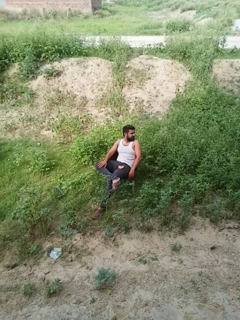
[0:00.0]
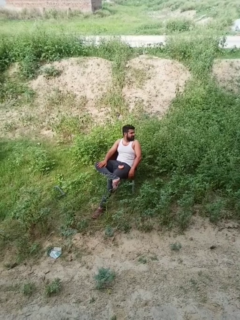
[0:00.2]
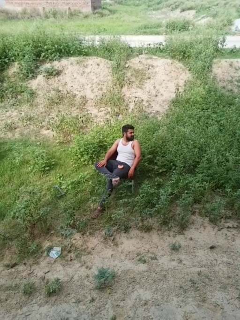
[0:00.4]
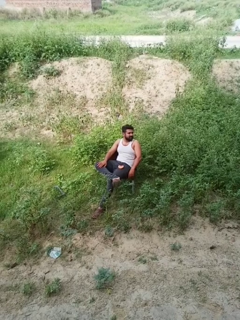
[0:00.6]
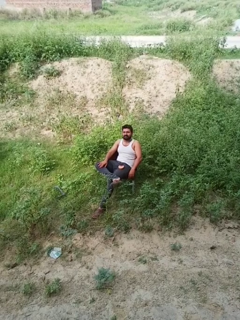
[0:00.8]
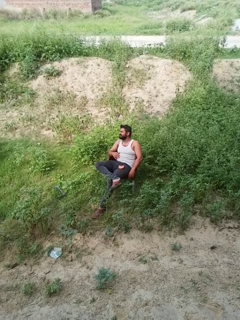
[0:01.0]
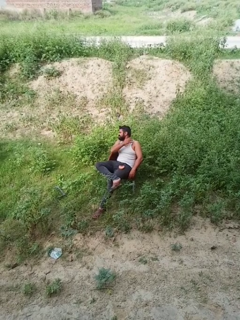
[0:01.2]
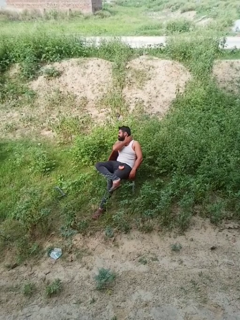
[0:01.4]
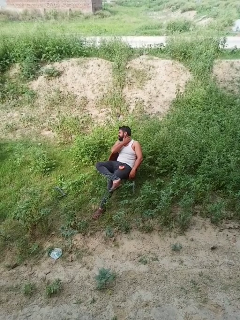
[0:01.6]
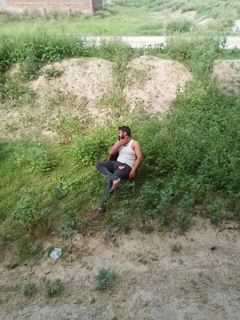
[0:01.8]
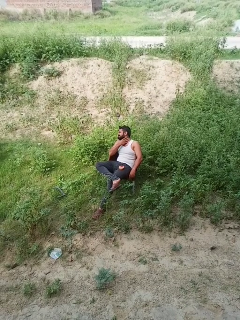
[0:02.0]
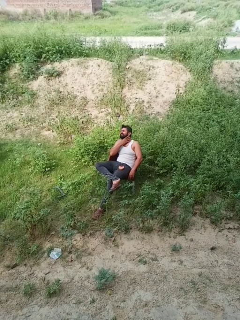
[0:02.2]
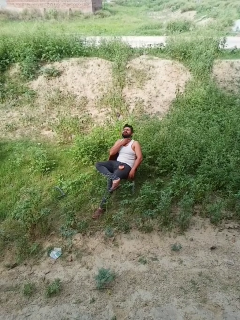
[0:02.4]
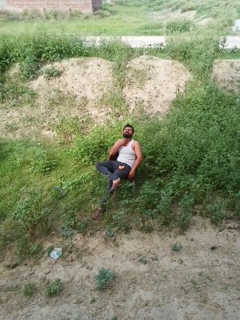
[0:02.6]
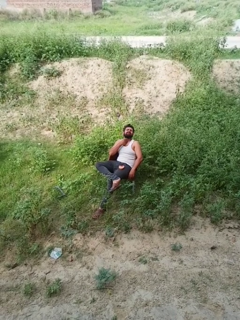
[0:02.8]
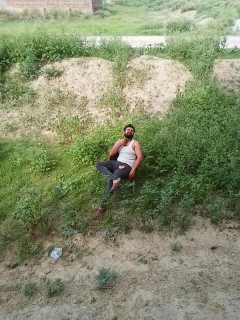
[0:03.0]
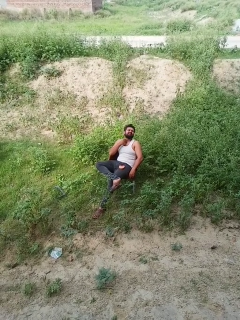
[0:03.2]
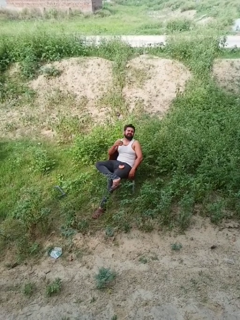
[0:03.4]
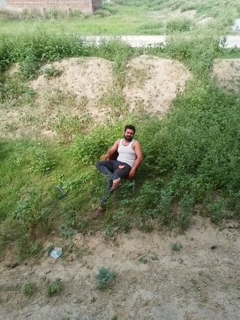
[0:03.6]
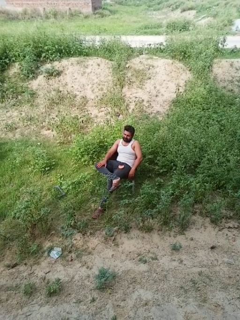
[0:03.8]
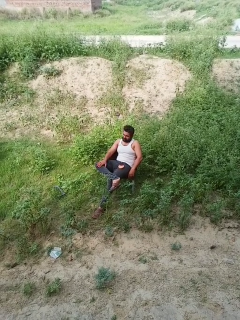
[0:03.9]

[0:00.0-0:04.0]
person rubs neck

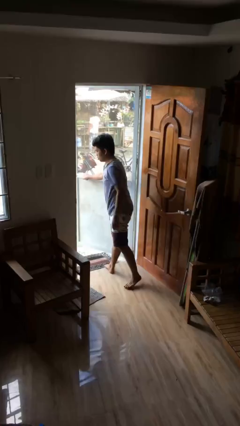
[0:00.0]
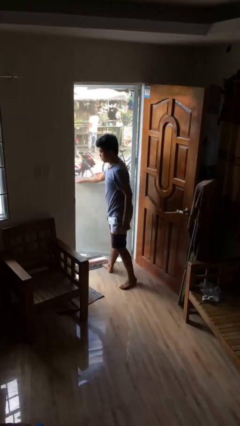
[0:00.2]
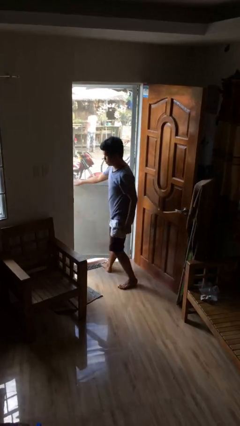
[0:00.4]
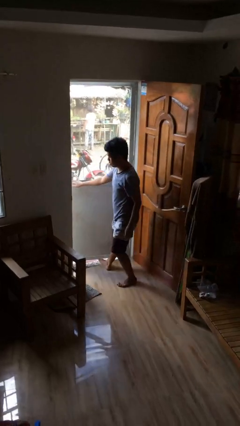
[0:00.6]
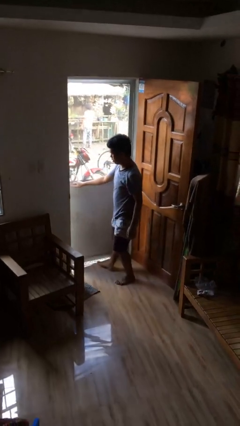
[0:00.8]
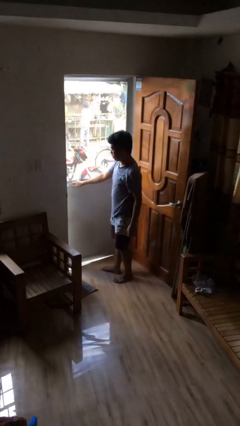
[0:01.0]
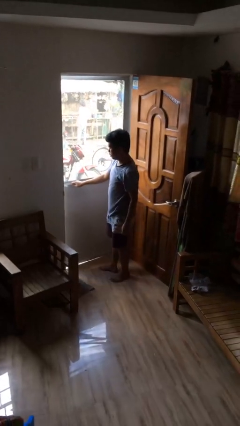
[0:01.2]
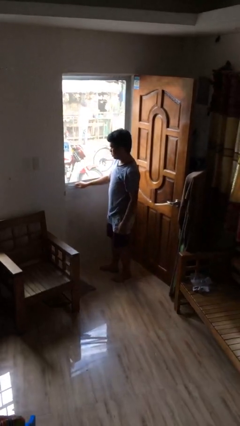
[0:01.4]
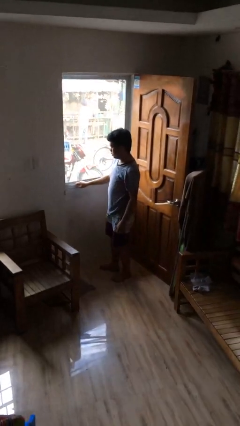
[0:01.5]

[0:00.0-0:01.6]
person closes facility door

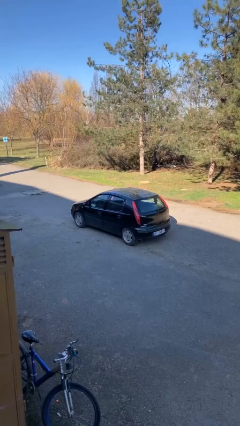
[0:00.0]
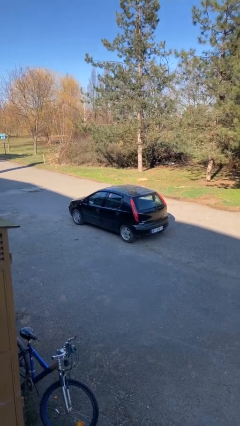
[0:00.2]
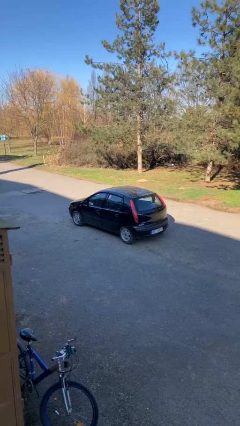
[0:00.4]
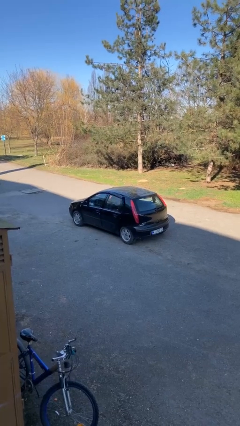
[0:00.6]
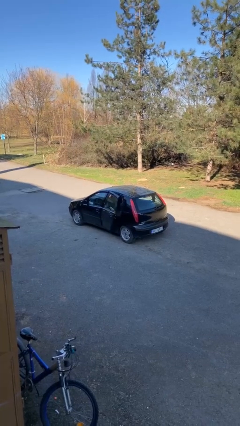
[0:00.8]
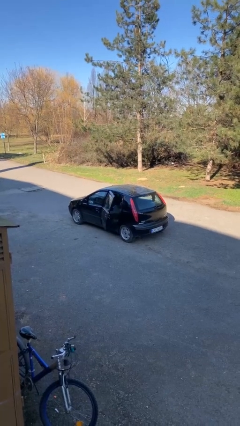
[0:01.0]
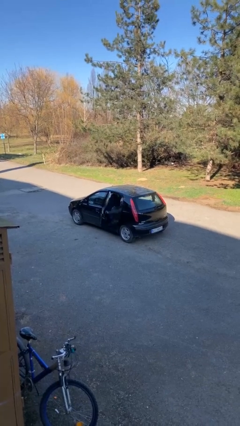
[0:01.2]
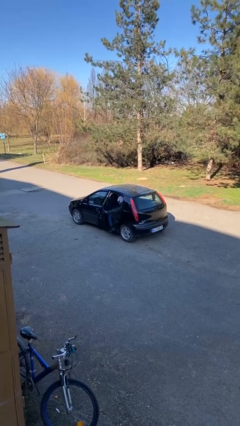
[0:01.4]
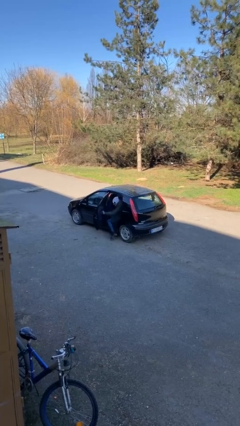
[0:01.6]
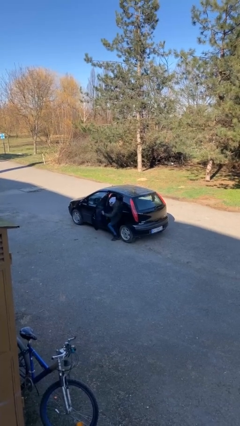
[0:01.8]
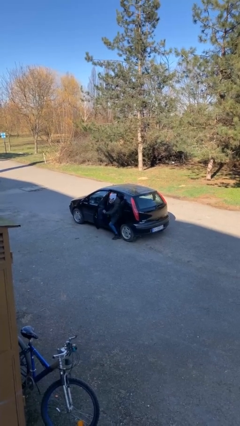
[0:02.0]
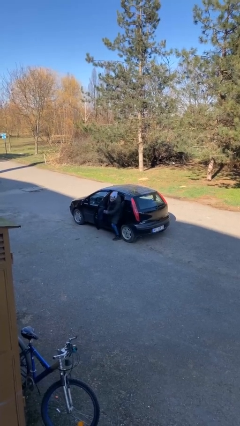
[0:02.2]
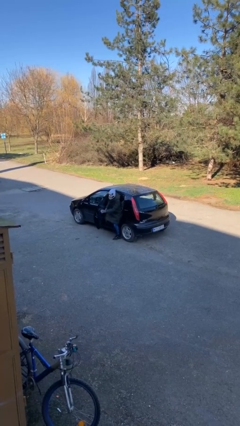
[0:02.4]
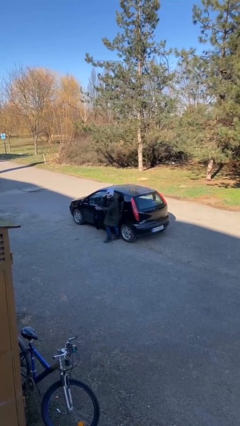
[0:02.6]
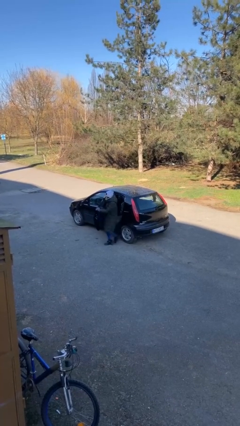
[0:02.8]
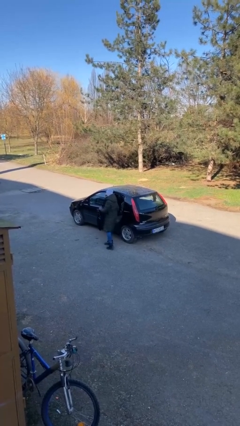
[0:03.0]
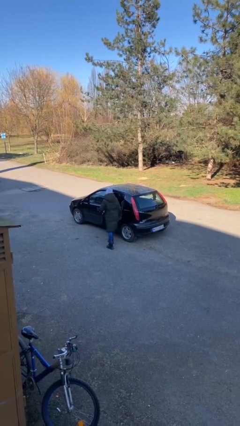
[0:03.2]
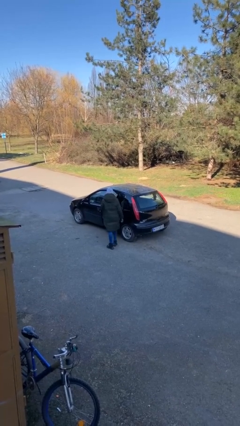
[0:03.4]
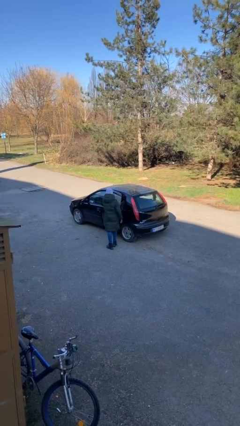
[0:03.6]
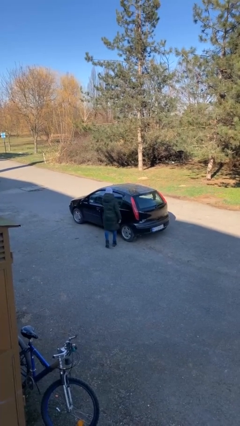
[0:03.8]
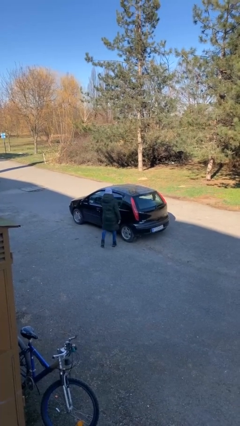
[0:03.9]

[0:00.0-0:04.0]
car drops off person

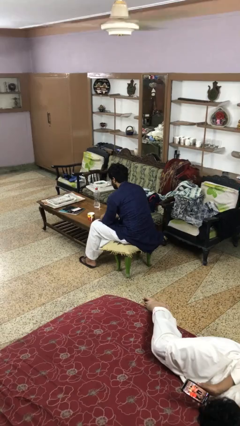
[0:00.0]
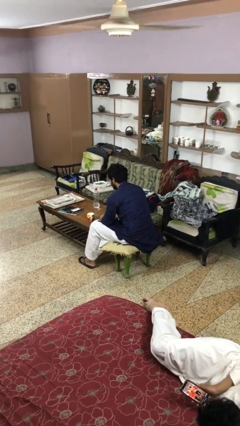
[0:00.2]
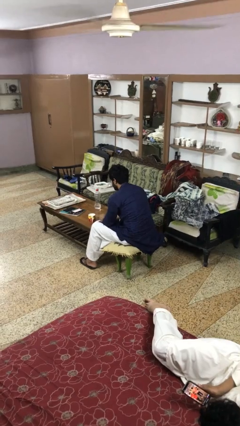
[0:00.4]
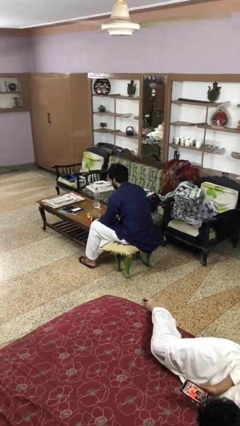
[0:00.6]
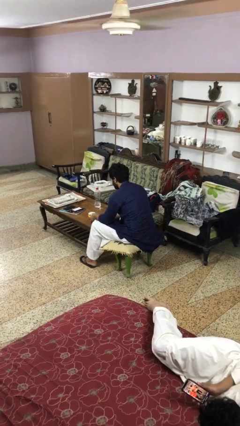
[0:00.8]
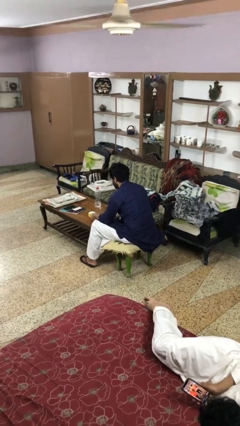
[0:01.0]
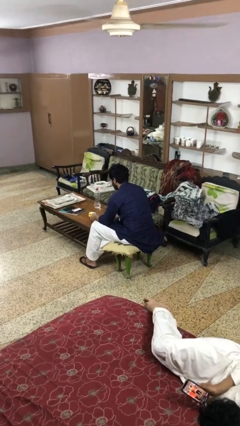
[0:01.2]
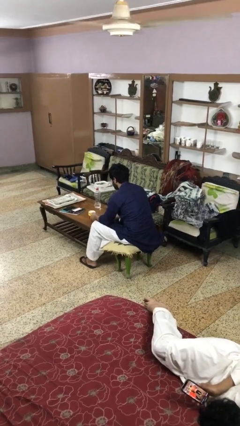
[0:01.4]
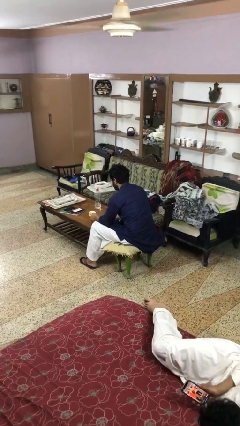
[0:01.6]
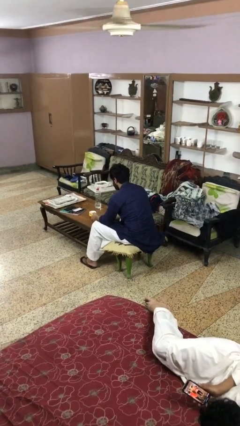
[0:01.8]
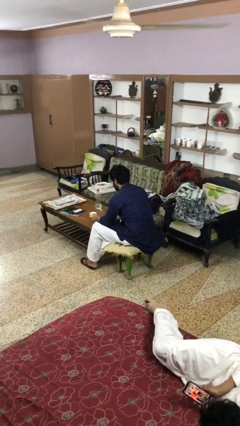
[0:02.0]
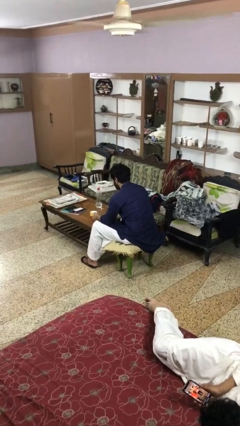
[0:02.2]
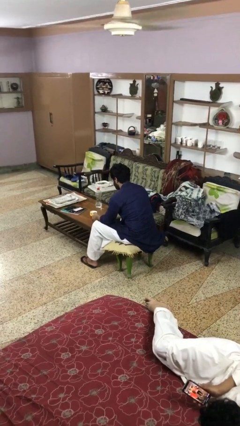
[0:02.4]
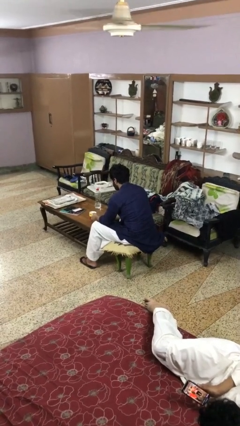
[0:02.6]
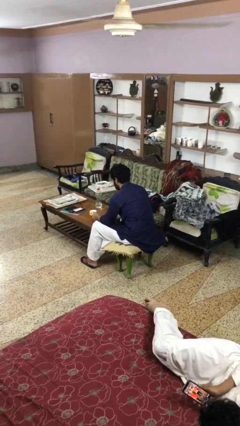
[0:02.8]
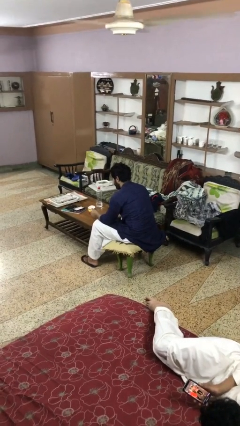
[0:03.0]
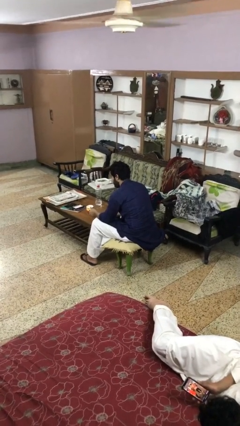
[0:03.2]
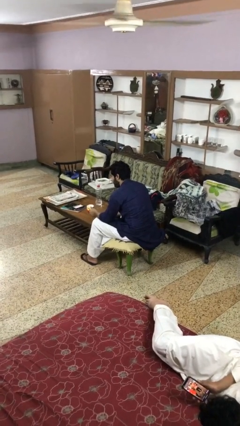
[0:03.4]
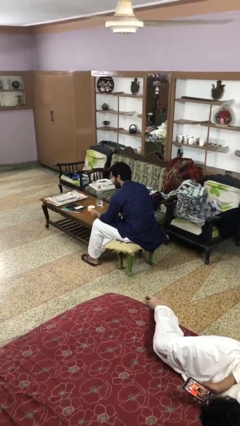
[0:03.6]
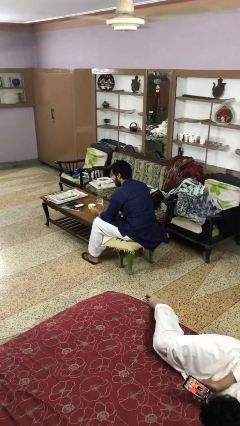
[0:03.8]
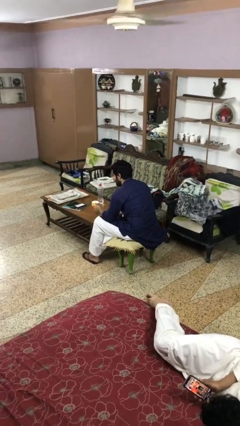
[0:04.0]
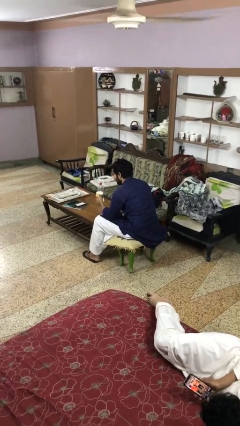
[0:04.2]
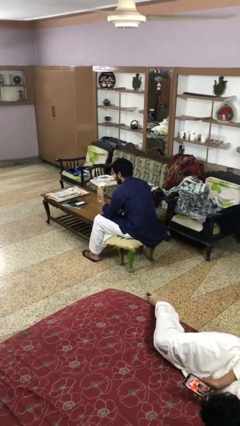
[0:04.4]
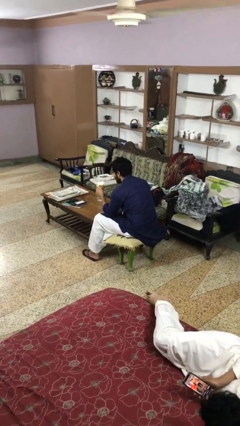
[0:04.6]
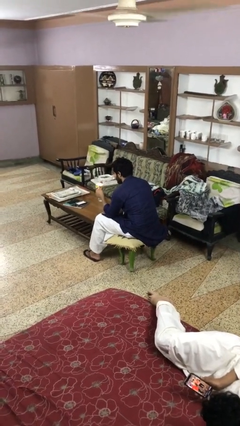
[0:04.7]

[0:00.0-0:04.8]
person picks up object from table

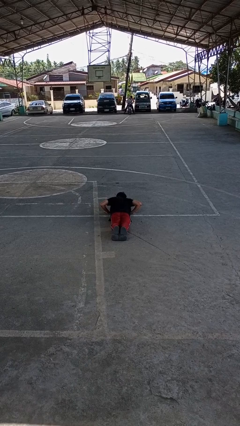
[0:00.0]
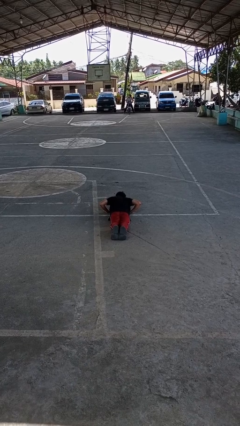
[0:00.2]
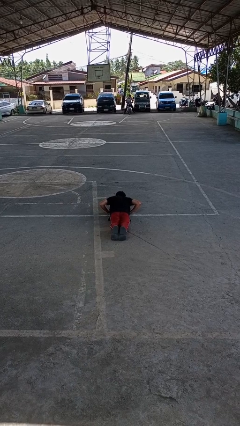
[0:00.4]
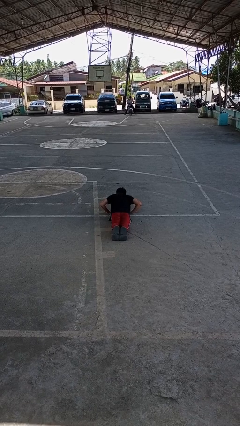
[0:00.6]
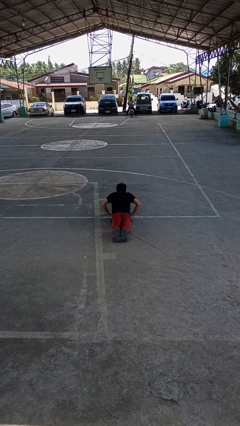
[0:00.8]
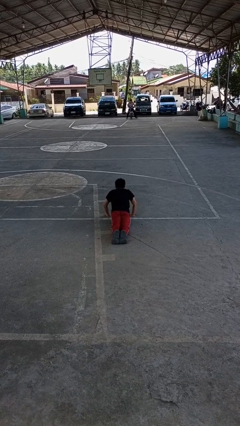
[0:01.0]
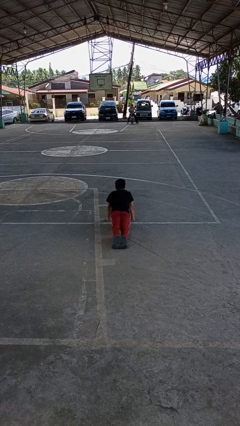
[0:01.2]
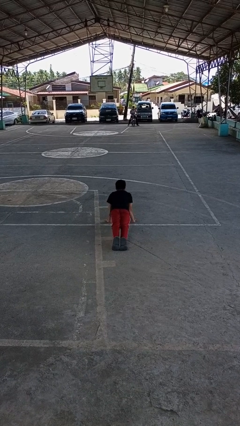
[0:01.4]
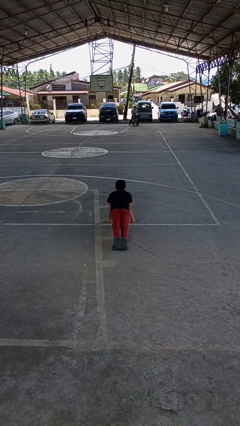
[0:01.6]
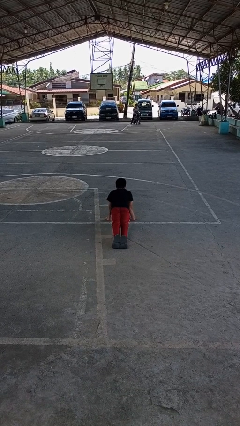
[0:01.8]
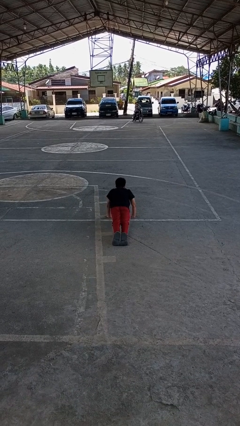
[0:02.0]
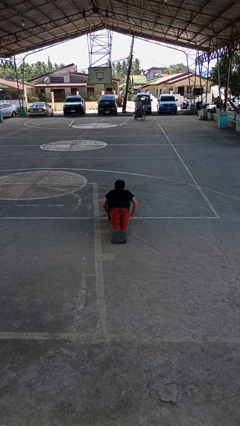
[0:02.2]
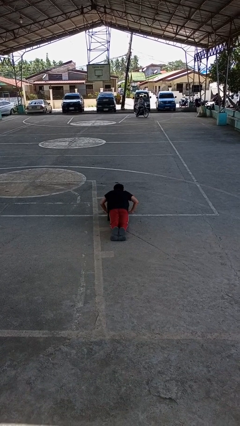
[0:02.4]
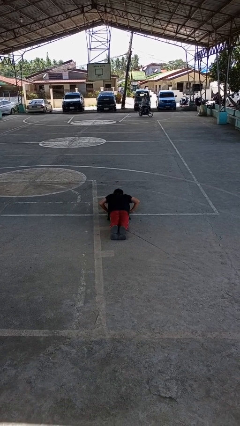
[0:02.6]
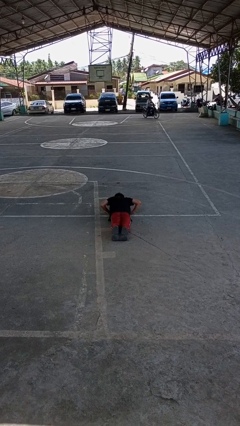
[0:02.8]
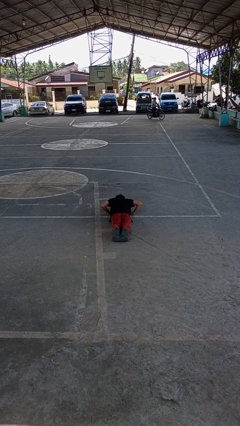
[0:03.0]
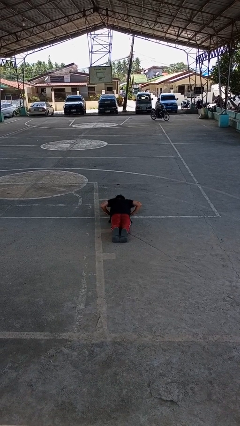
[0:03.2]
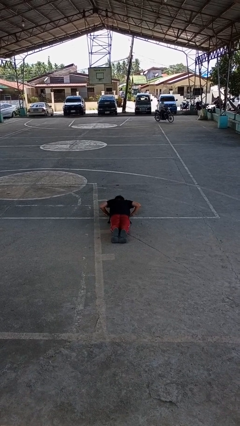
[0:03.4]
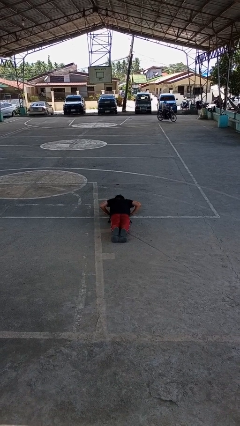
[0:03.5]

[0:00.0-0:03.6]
person exercises with pushup

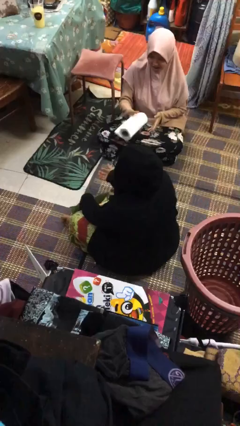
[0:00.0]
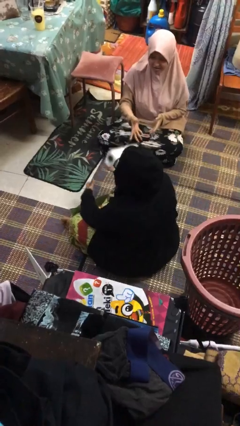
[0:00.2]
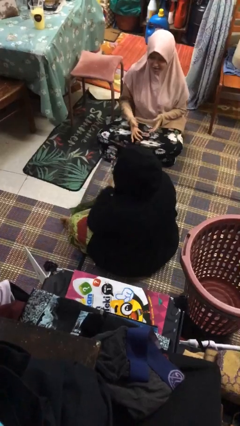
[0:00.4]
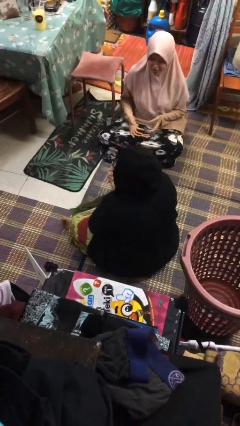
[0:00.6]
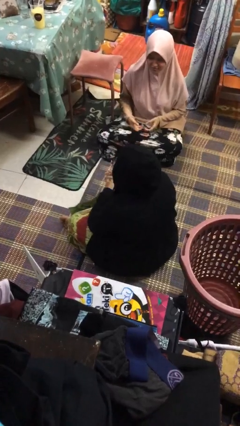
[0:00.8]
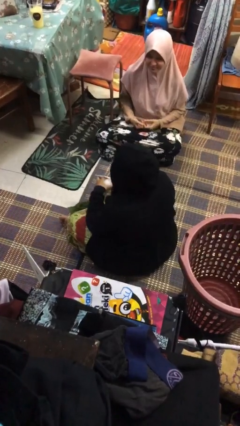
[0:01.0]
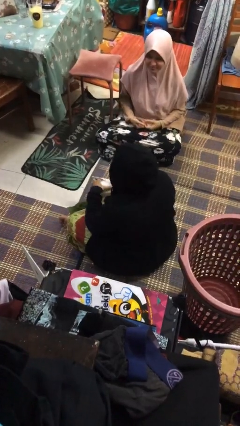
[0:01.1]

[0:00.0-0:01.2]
person catches object from person
